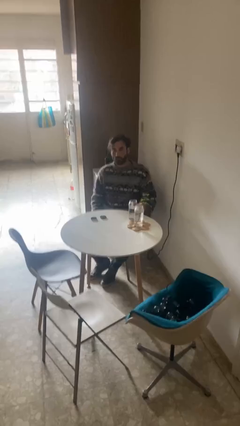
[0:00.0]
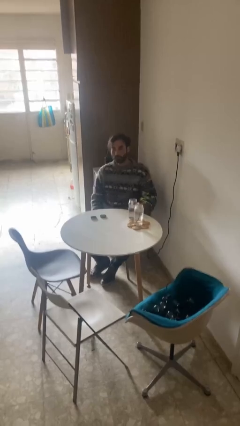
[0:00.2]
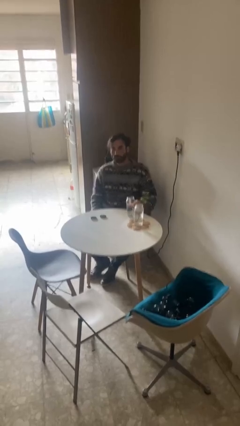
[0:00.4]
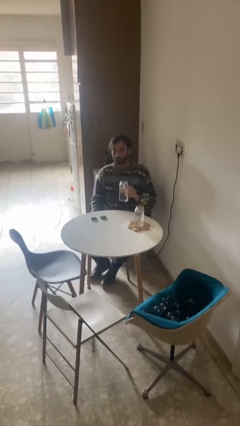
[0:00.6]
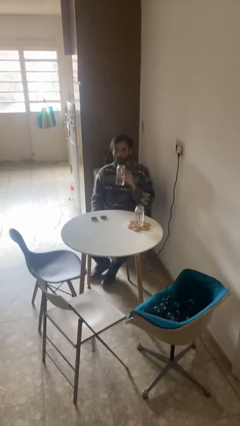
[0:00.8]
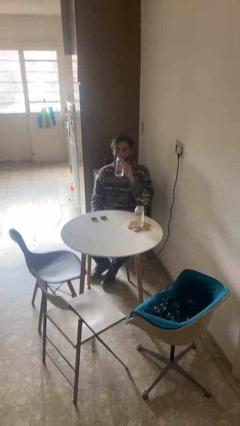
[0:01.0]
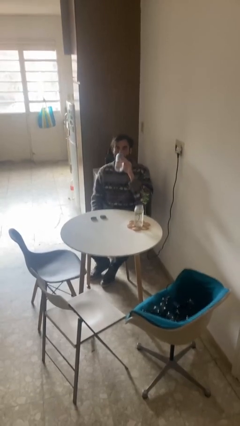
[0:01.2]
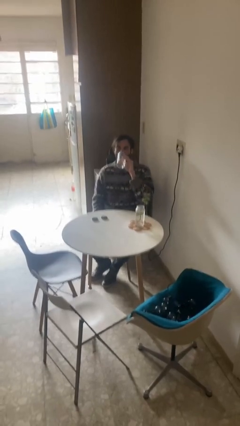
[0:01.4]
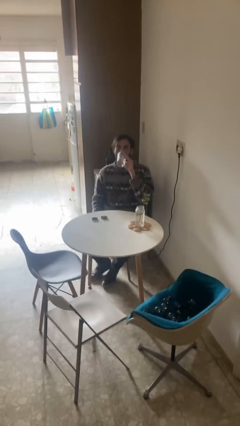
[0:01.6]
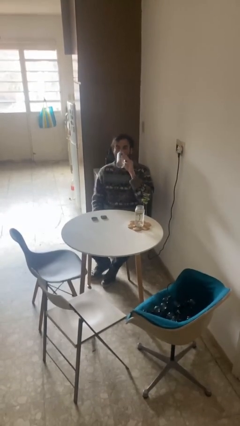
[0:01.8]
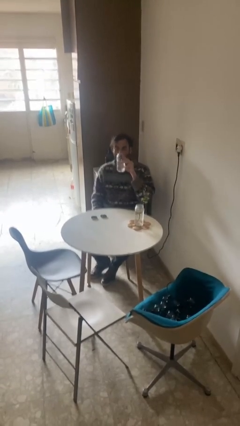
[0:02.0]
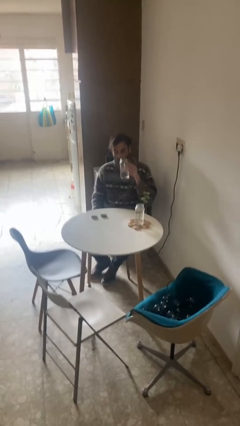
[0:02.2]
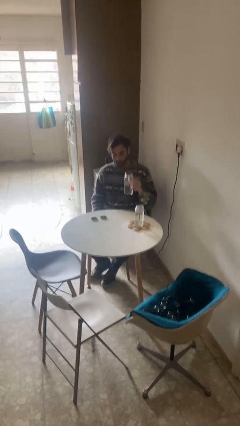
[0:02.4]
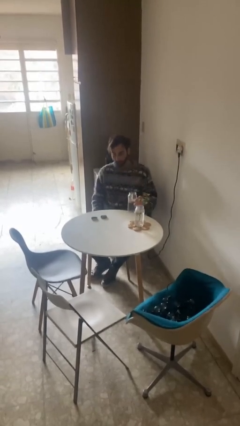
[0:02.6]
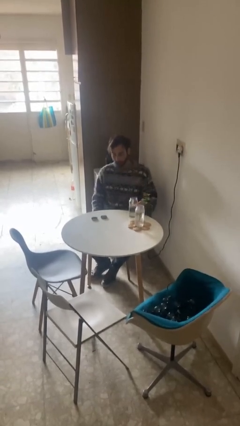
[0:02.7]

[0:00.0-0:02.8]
person drinks from cup

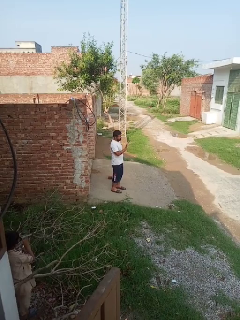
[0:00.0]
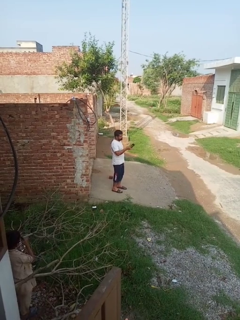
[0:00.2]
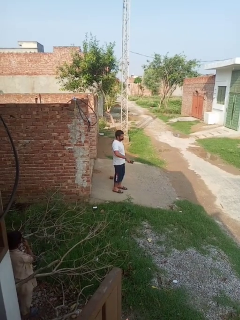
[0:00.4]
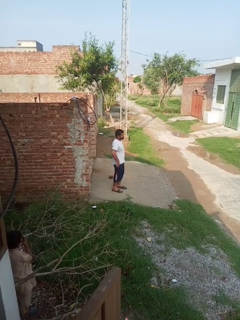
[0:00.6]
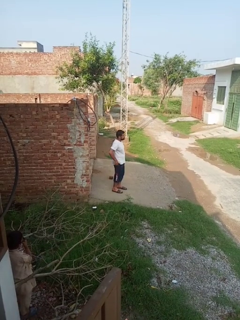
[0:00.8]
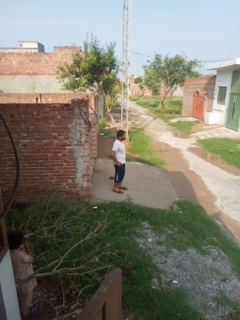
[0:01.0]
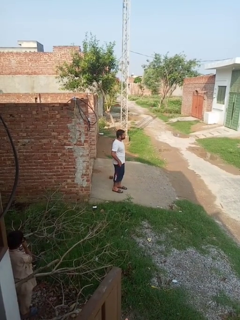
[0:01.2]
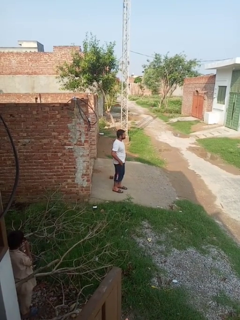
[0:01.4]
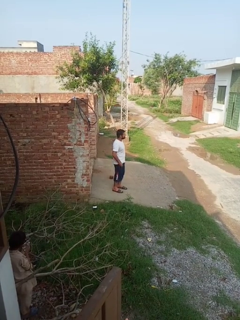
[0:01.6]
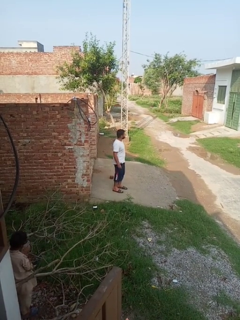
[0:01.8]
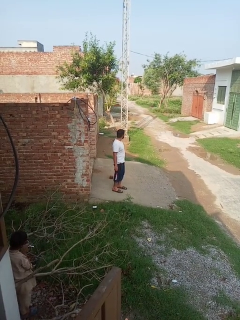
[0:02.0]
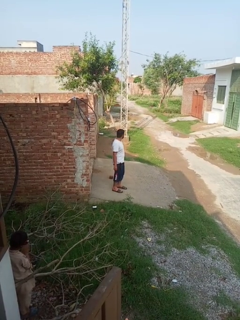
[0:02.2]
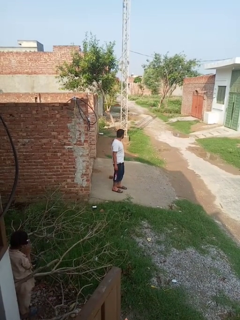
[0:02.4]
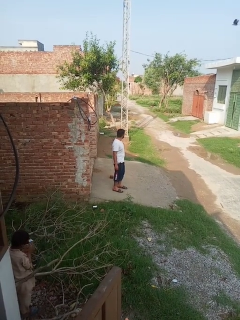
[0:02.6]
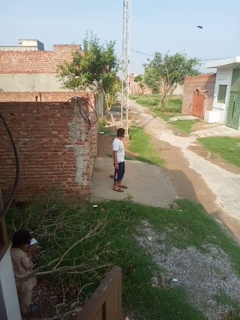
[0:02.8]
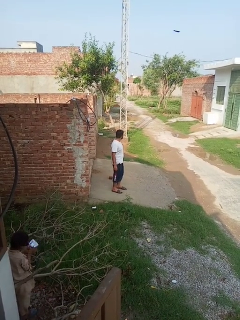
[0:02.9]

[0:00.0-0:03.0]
person puts phone into pocket

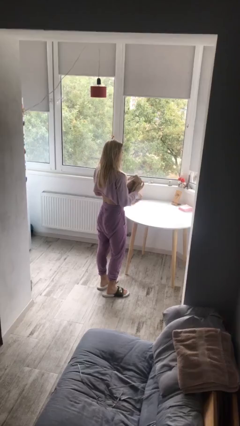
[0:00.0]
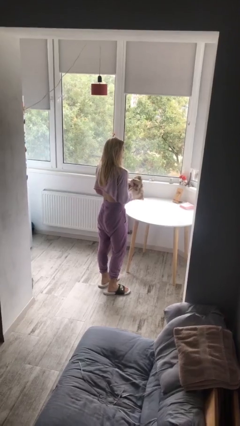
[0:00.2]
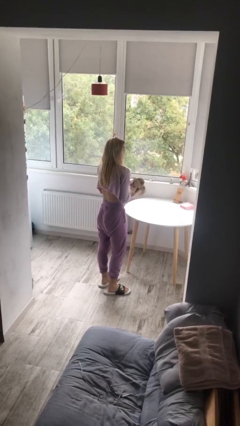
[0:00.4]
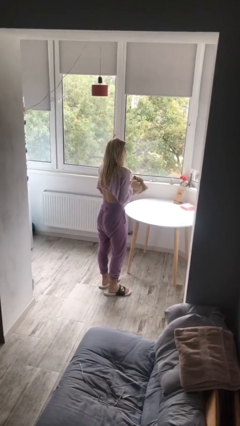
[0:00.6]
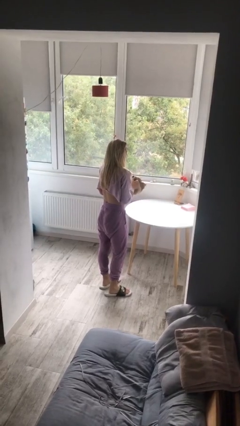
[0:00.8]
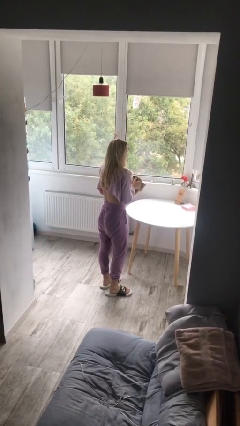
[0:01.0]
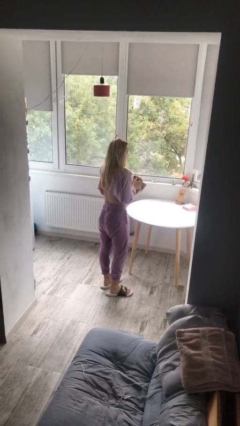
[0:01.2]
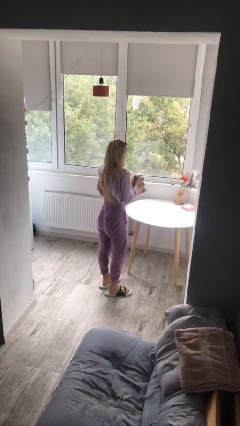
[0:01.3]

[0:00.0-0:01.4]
person crumples paper

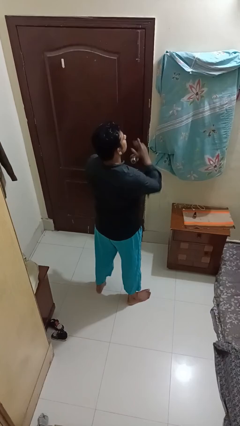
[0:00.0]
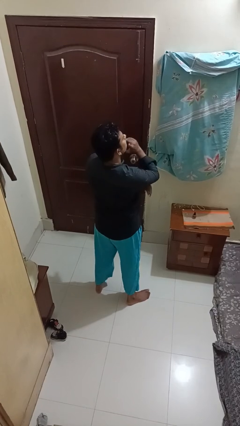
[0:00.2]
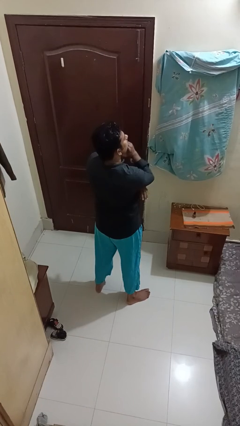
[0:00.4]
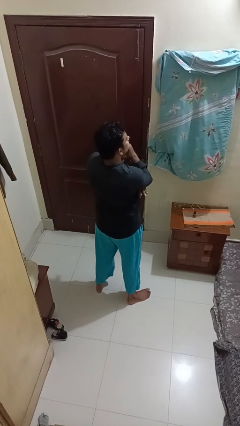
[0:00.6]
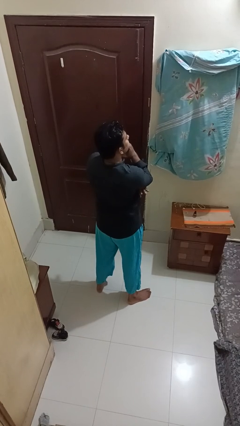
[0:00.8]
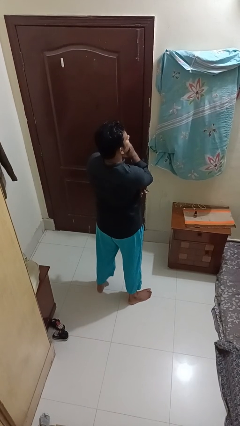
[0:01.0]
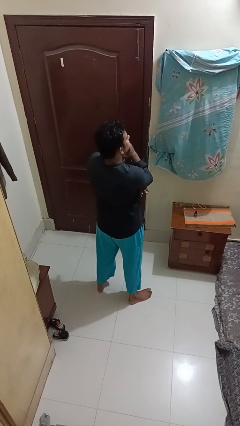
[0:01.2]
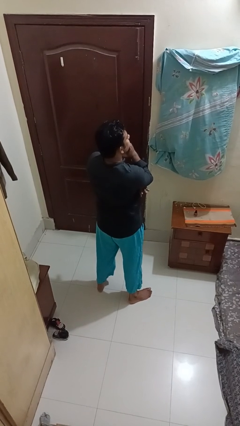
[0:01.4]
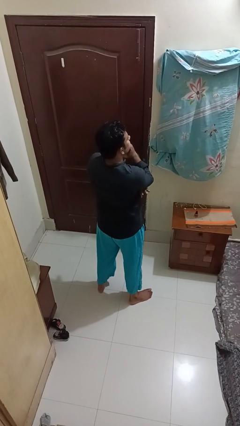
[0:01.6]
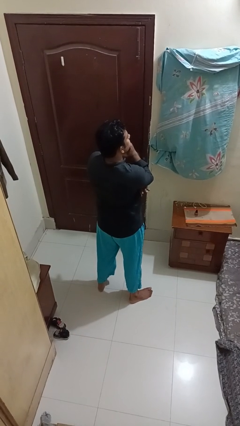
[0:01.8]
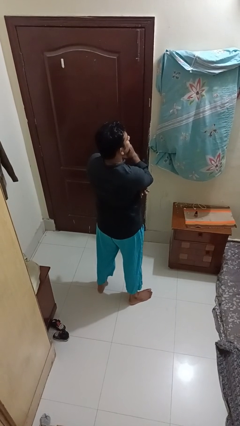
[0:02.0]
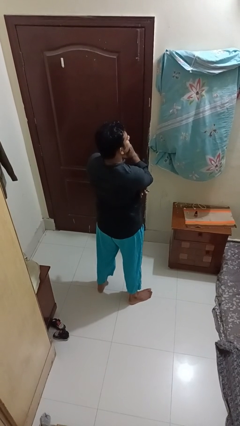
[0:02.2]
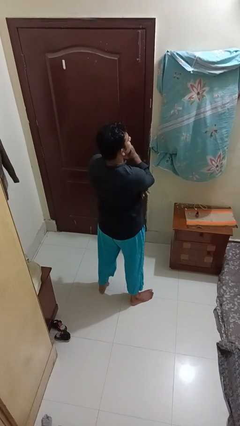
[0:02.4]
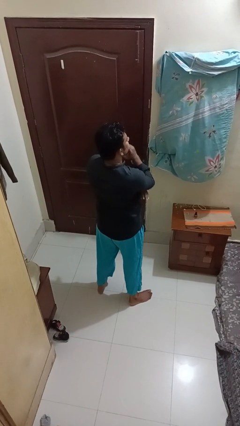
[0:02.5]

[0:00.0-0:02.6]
person strokes chin

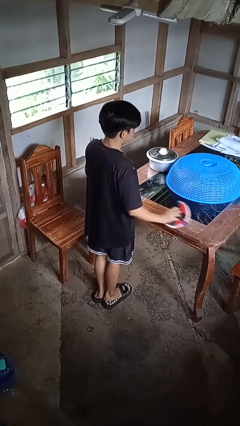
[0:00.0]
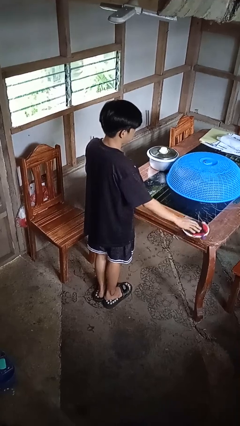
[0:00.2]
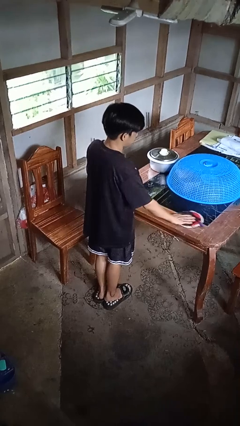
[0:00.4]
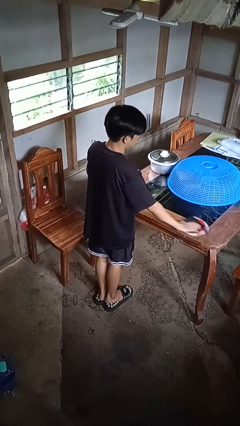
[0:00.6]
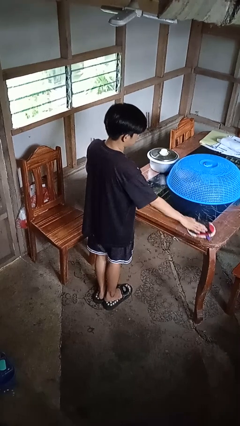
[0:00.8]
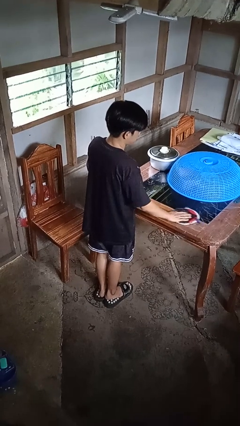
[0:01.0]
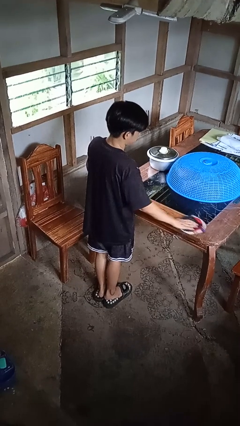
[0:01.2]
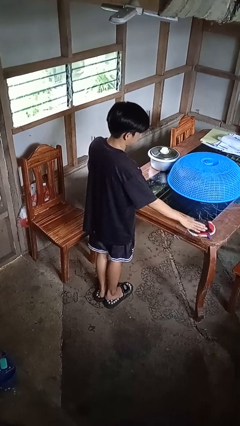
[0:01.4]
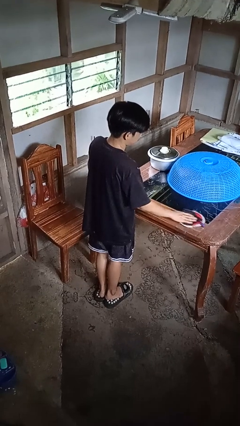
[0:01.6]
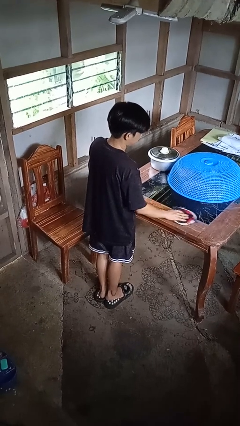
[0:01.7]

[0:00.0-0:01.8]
person cleans table with rag

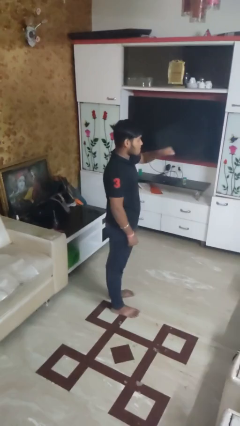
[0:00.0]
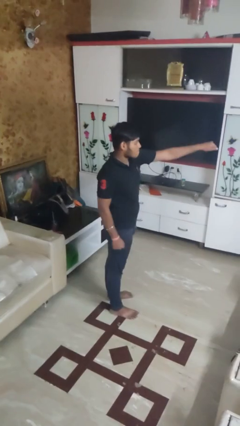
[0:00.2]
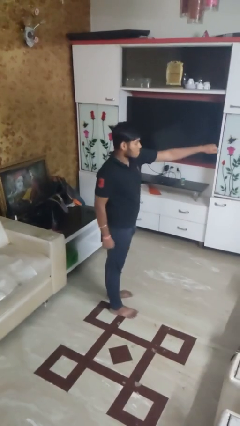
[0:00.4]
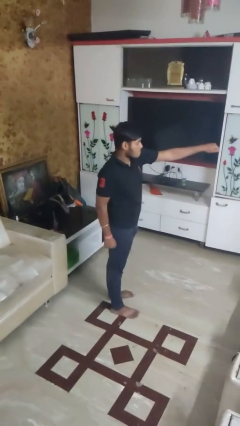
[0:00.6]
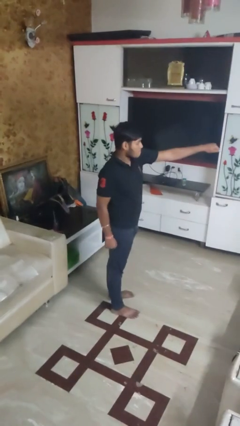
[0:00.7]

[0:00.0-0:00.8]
person punches

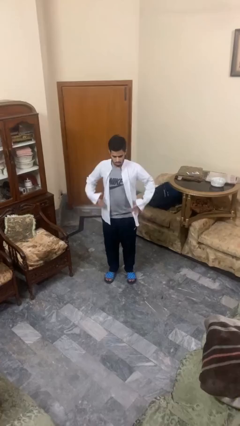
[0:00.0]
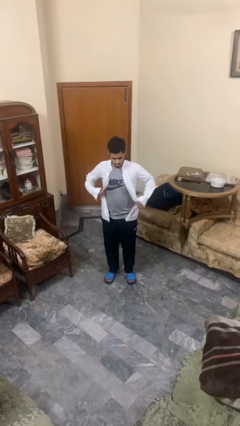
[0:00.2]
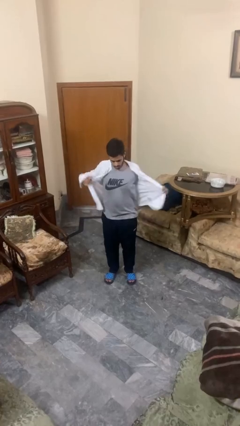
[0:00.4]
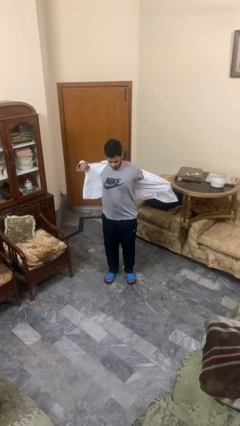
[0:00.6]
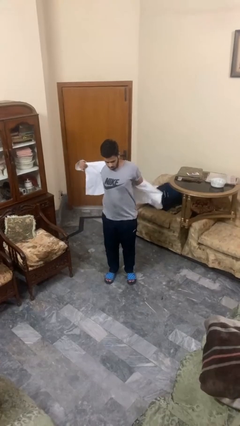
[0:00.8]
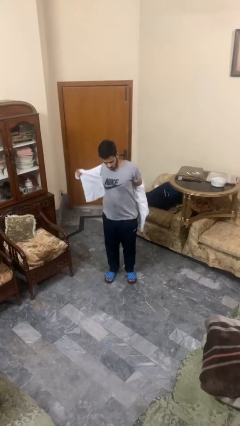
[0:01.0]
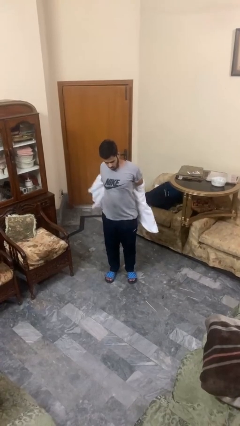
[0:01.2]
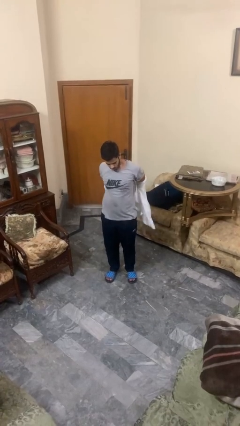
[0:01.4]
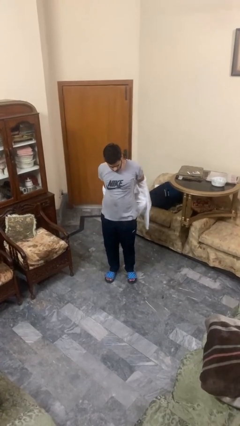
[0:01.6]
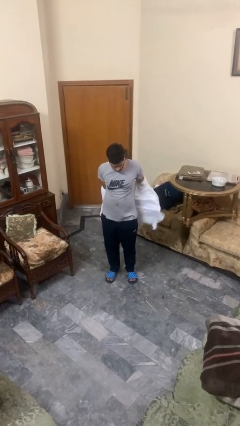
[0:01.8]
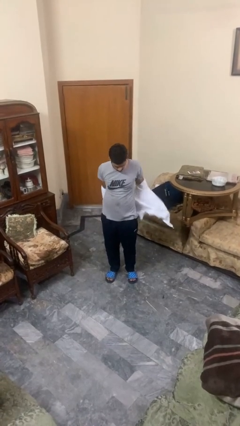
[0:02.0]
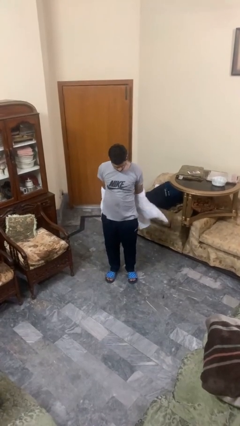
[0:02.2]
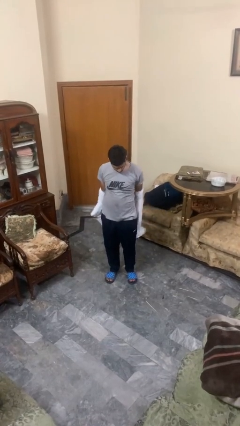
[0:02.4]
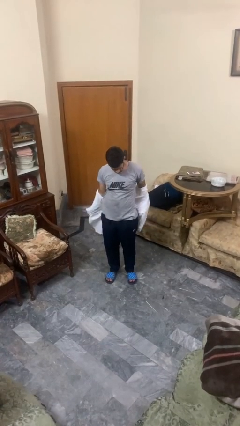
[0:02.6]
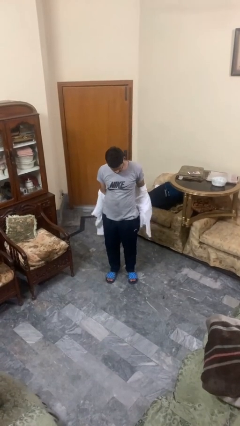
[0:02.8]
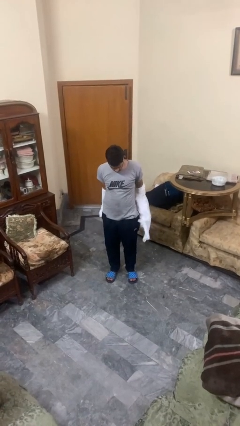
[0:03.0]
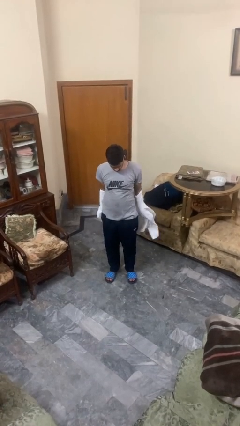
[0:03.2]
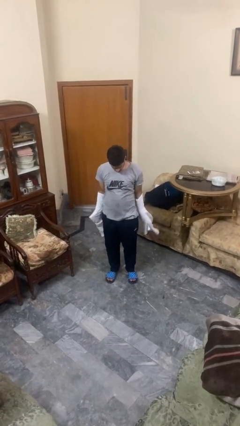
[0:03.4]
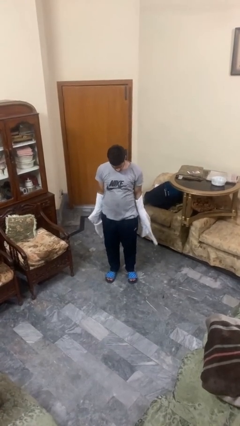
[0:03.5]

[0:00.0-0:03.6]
person takes off shirt

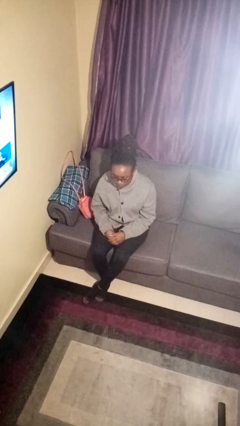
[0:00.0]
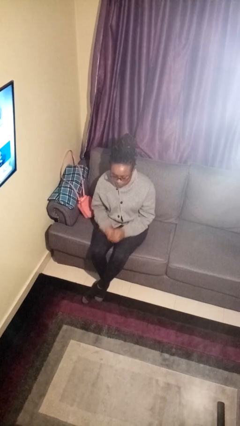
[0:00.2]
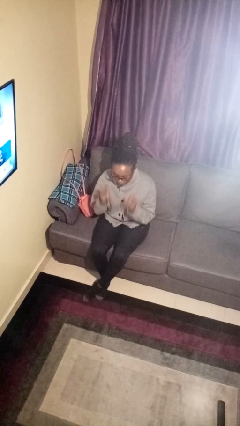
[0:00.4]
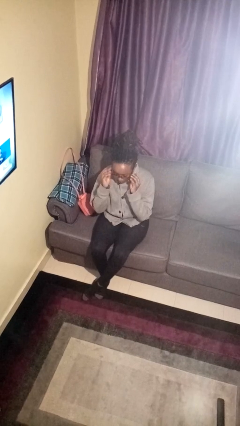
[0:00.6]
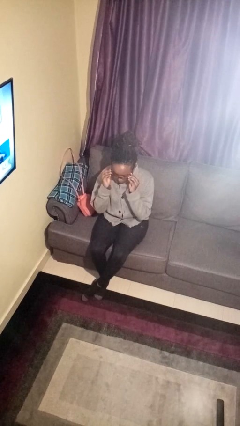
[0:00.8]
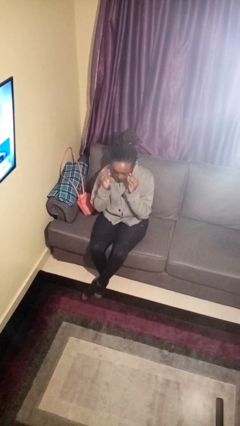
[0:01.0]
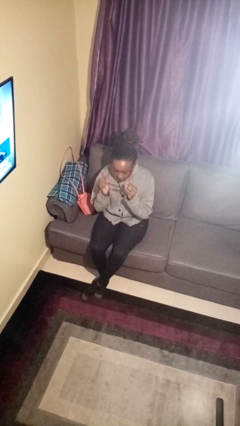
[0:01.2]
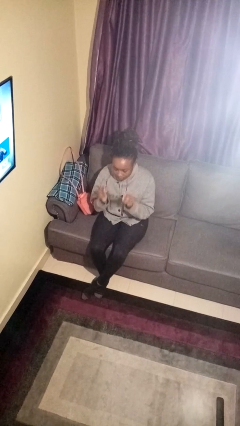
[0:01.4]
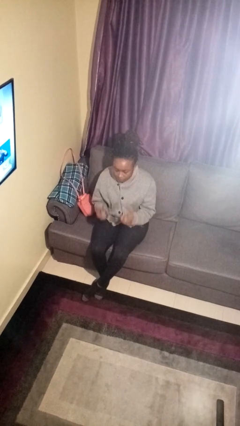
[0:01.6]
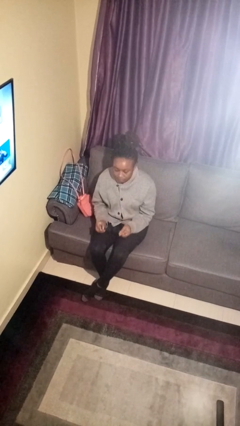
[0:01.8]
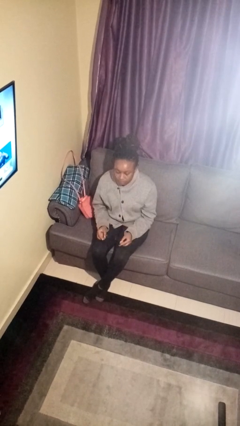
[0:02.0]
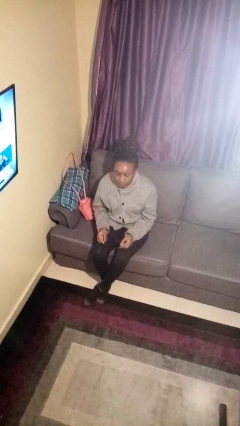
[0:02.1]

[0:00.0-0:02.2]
person takes off glasses
